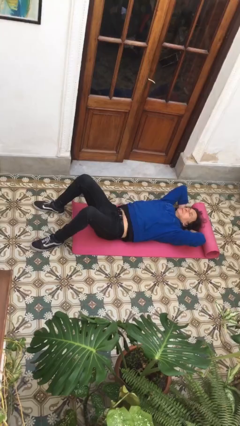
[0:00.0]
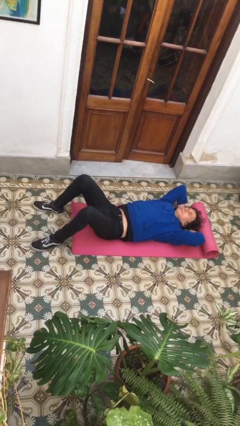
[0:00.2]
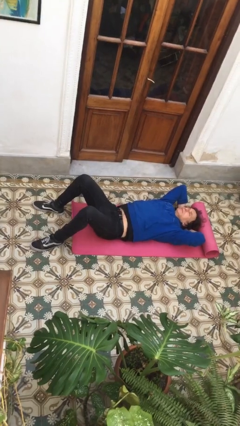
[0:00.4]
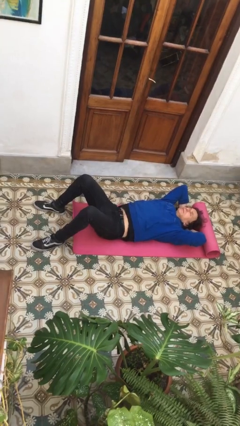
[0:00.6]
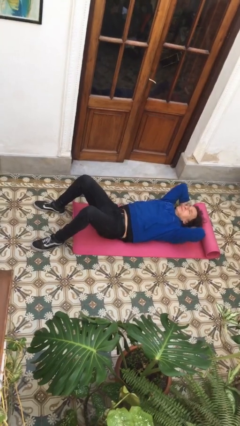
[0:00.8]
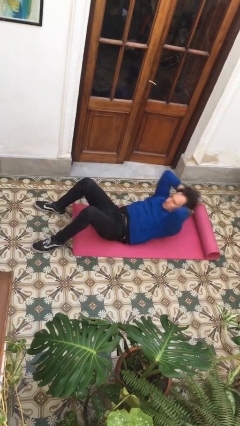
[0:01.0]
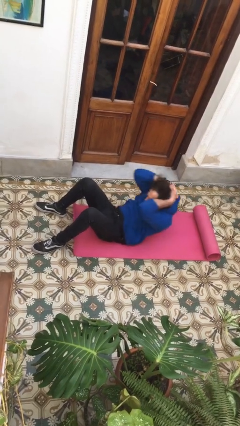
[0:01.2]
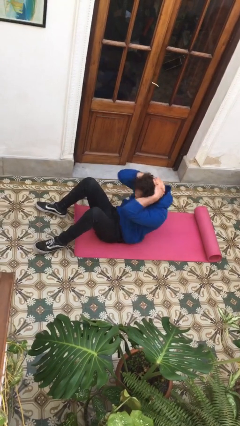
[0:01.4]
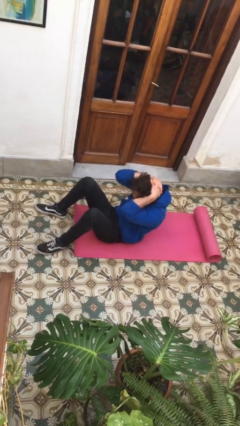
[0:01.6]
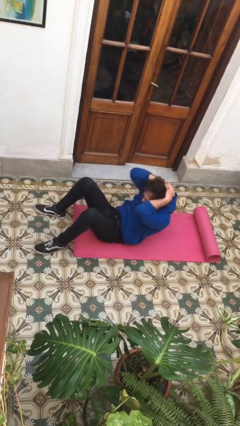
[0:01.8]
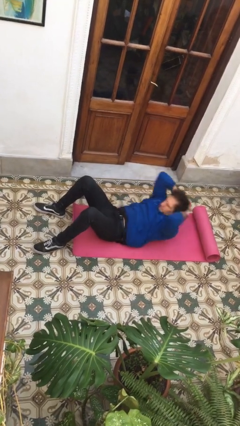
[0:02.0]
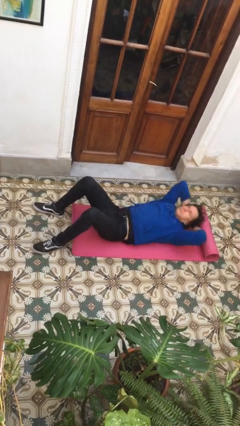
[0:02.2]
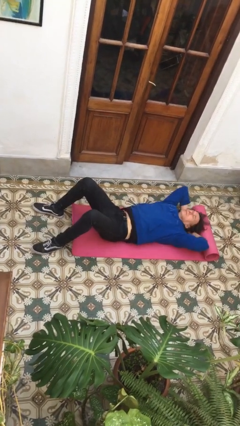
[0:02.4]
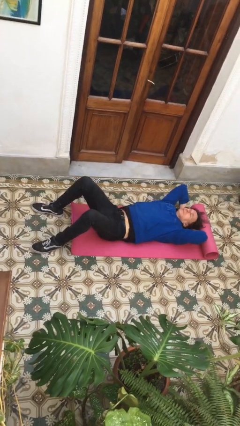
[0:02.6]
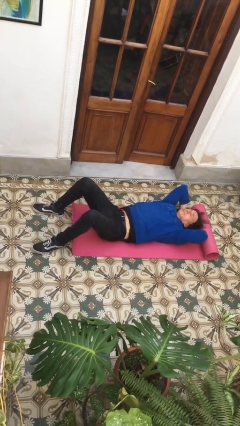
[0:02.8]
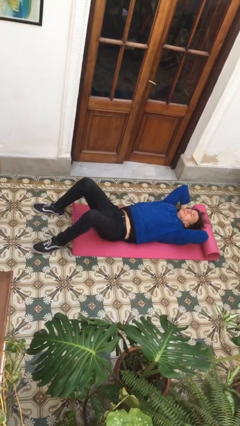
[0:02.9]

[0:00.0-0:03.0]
person exercises with situp

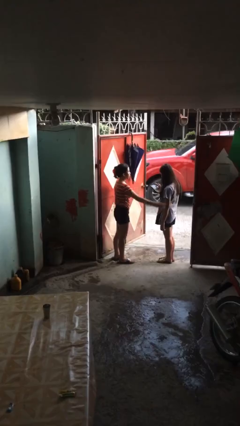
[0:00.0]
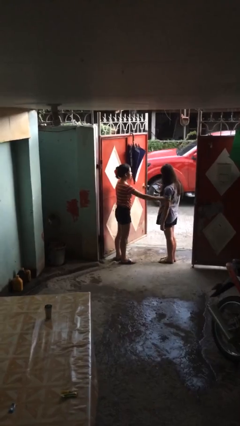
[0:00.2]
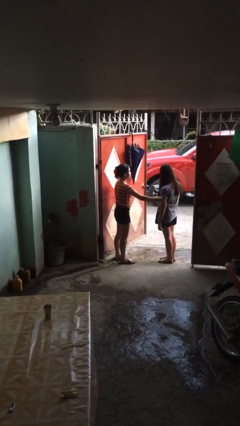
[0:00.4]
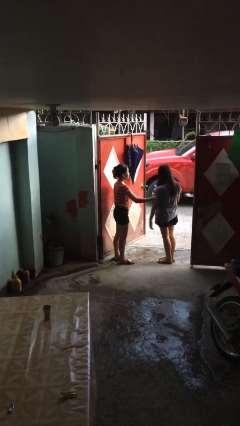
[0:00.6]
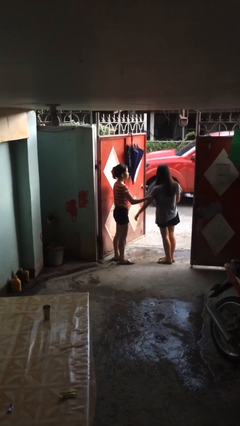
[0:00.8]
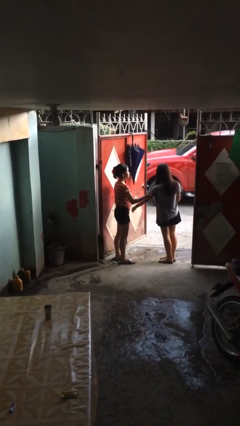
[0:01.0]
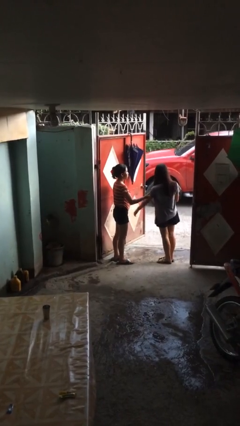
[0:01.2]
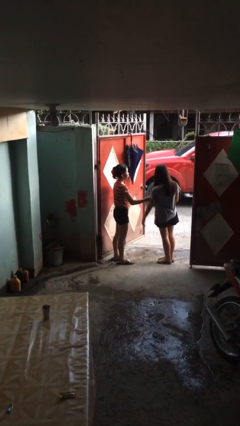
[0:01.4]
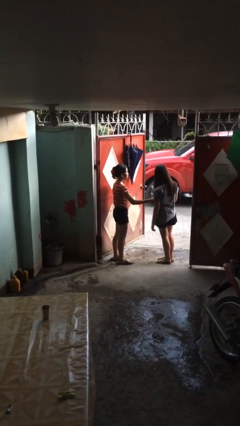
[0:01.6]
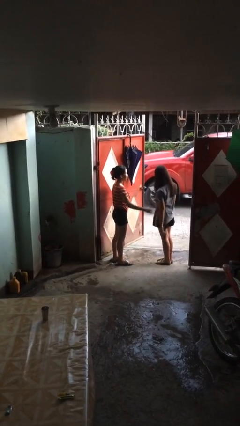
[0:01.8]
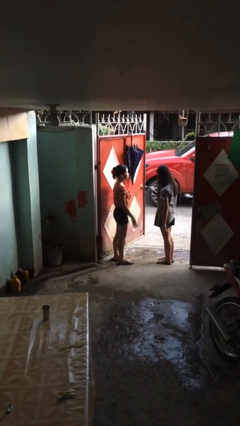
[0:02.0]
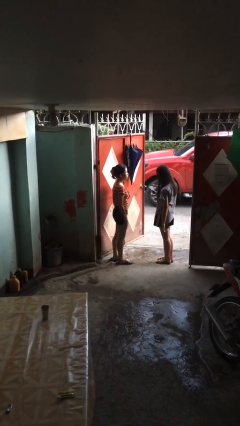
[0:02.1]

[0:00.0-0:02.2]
person grabs person by bicep

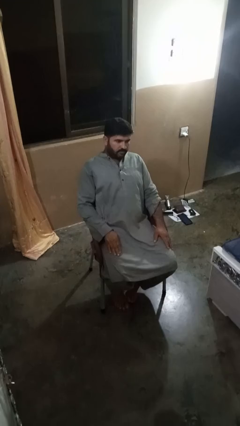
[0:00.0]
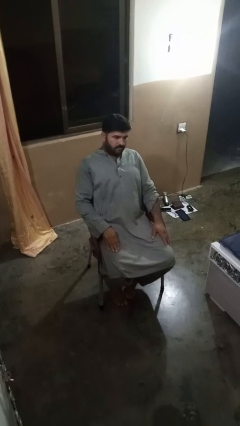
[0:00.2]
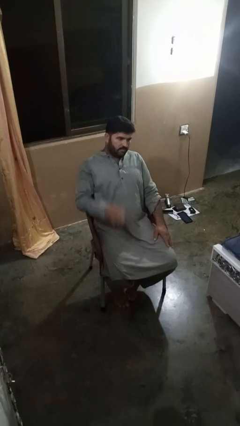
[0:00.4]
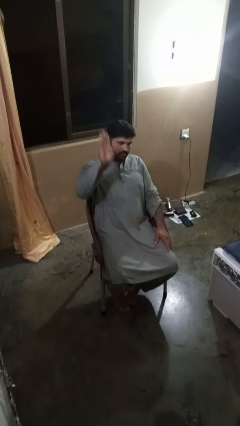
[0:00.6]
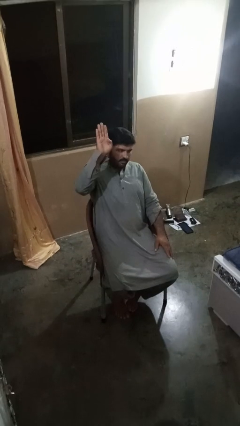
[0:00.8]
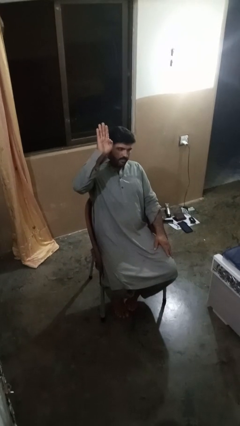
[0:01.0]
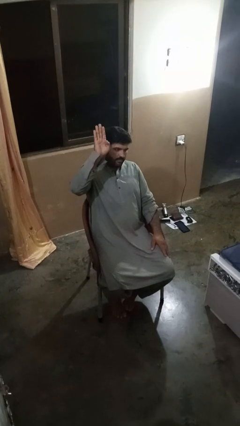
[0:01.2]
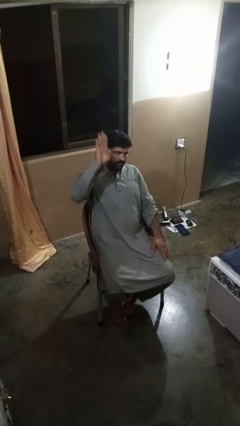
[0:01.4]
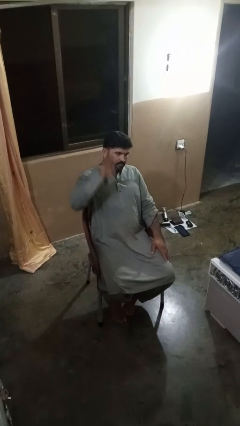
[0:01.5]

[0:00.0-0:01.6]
person gestures number four

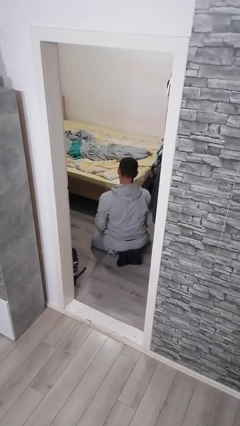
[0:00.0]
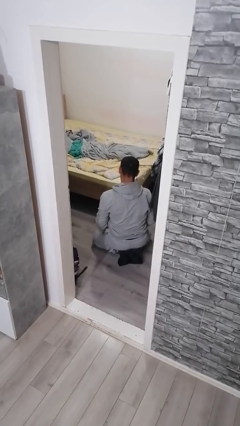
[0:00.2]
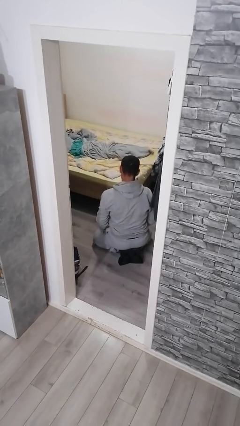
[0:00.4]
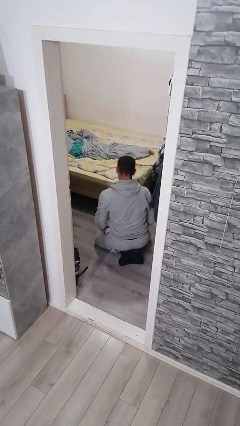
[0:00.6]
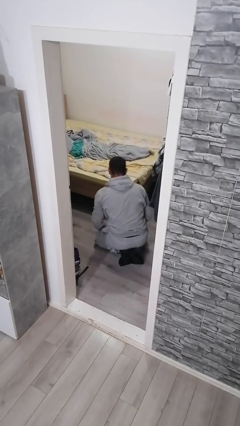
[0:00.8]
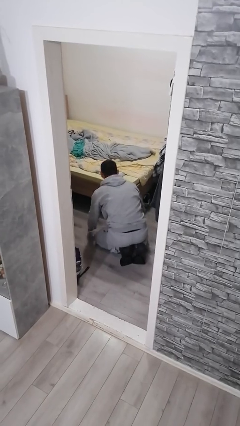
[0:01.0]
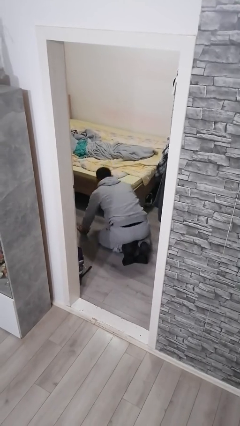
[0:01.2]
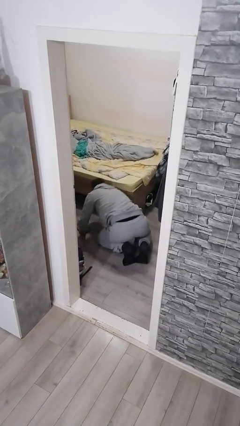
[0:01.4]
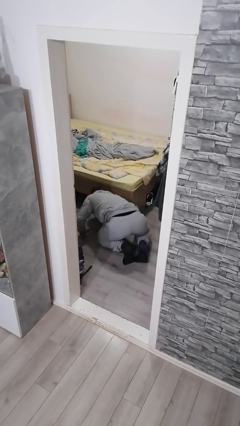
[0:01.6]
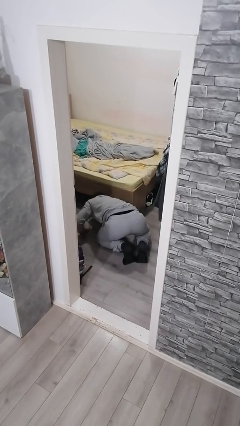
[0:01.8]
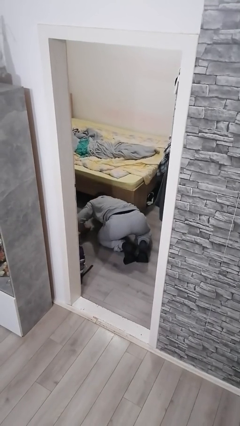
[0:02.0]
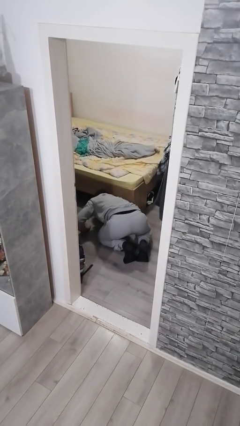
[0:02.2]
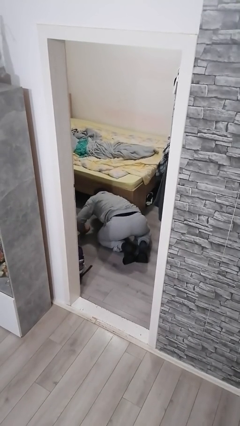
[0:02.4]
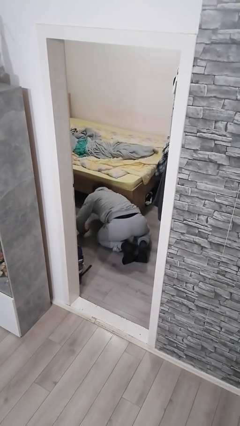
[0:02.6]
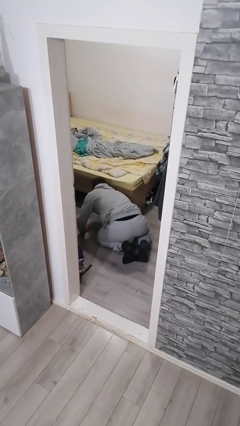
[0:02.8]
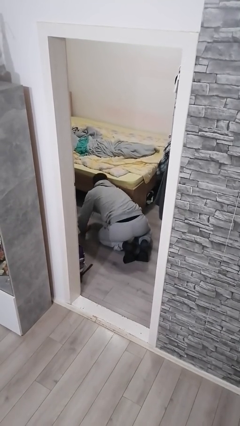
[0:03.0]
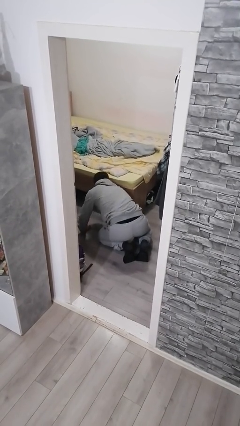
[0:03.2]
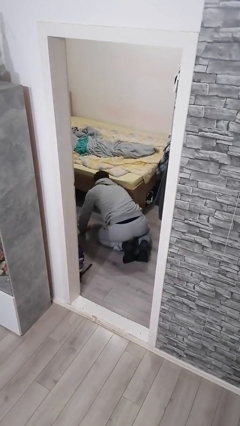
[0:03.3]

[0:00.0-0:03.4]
person searches under bed

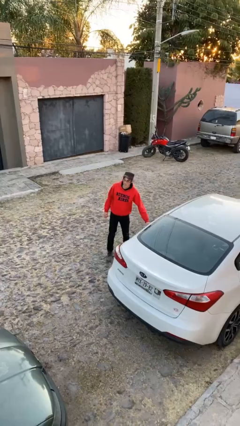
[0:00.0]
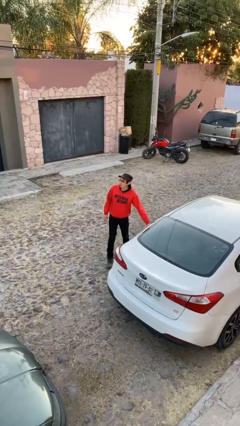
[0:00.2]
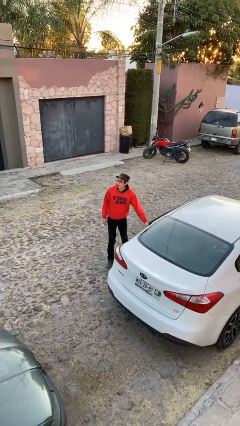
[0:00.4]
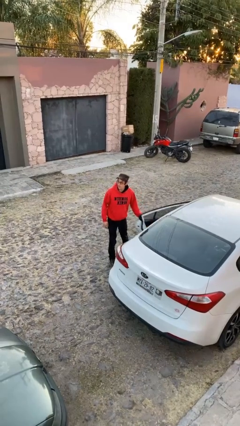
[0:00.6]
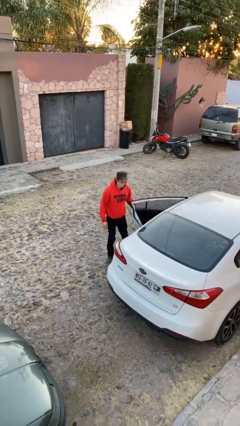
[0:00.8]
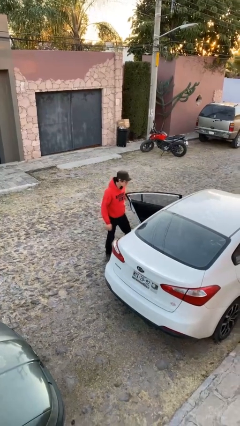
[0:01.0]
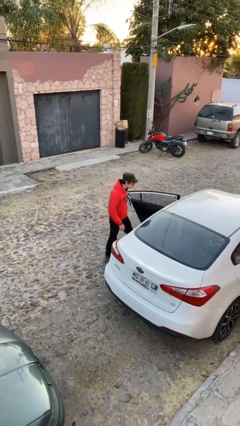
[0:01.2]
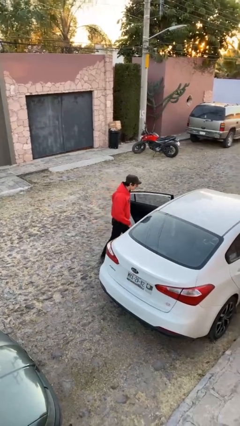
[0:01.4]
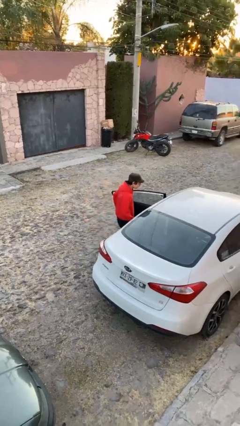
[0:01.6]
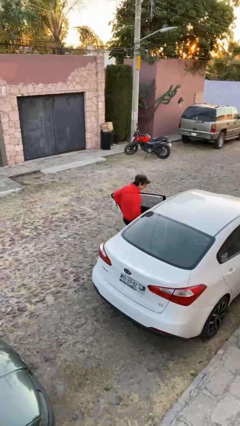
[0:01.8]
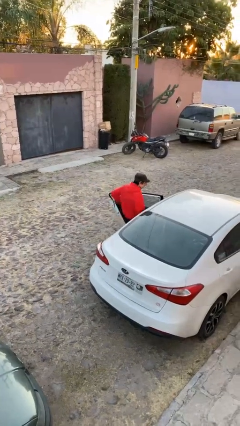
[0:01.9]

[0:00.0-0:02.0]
car picks up person

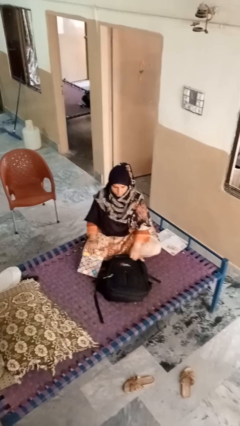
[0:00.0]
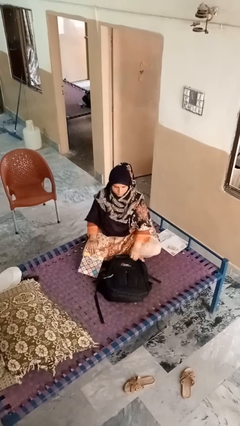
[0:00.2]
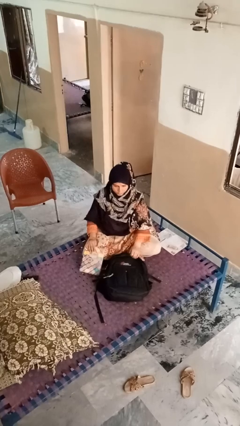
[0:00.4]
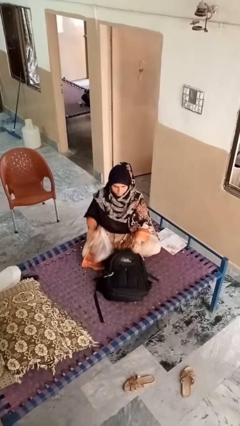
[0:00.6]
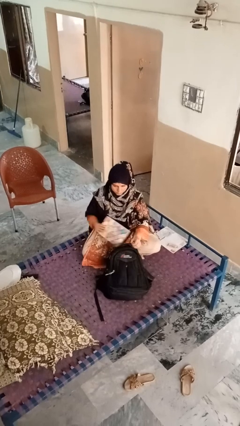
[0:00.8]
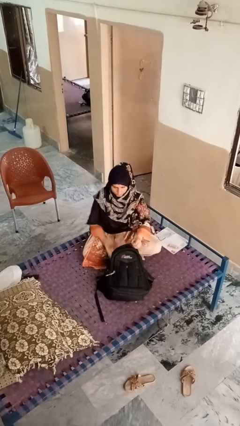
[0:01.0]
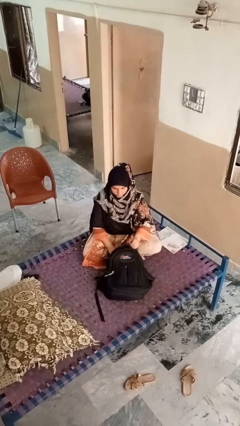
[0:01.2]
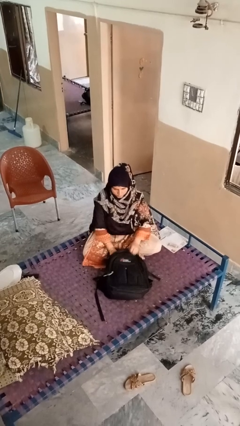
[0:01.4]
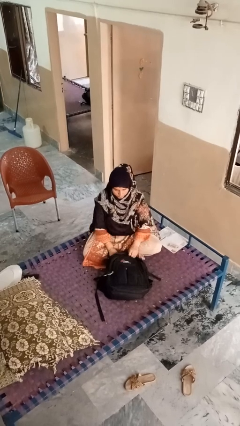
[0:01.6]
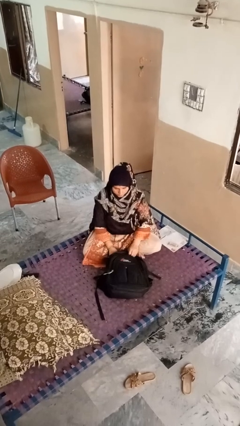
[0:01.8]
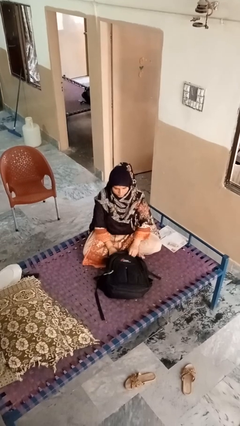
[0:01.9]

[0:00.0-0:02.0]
person puts object into bag

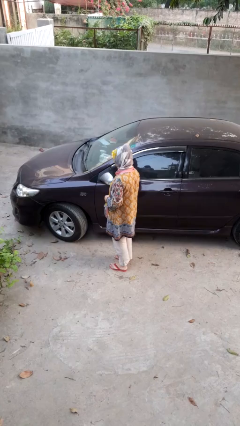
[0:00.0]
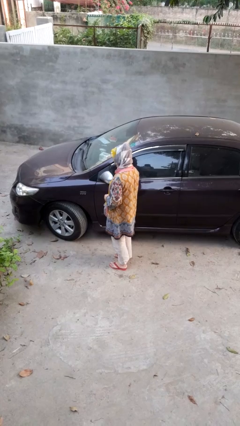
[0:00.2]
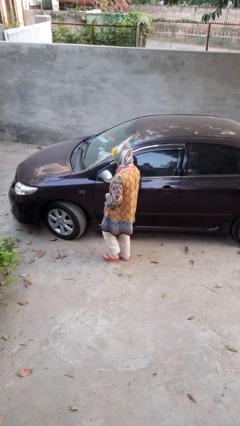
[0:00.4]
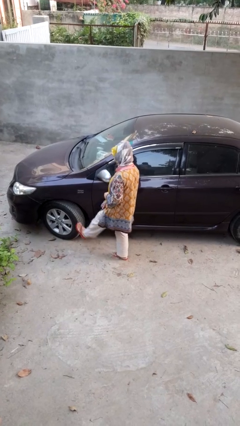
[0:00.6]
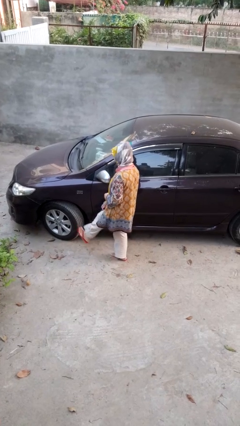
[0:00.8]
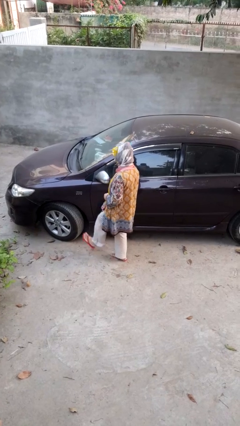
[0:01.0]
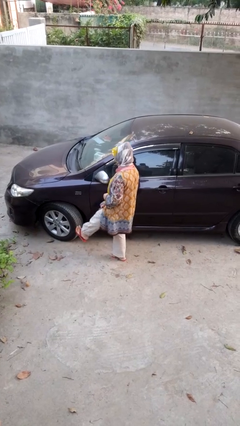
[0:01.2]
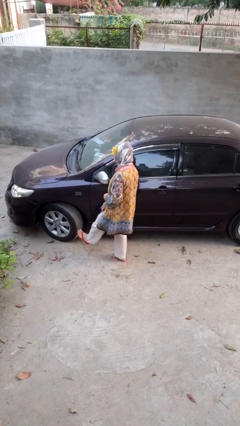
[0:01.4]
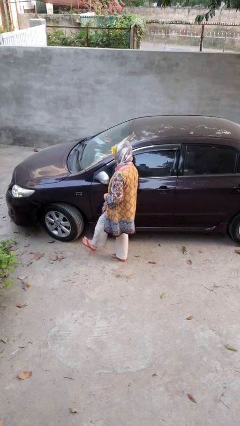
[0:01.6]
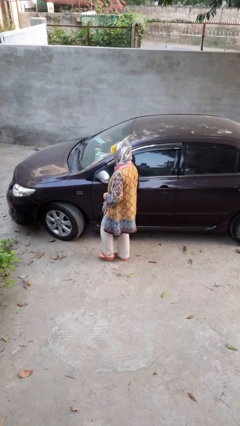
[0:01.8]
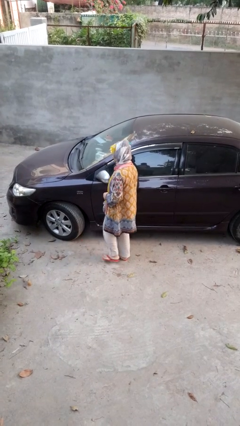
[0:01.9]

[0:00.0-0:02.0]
person kicks car tires

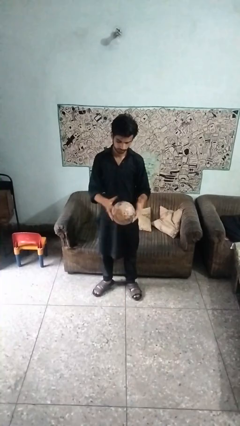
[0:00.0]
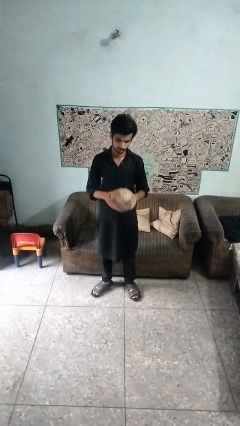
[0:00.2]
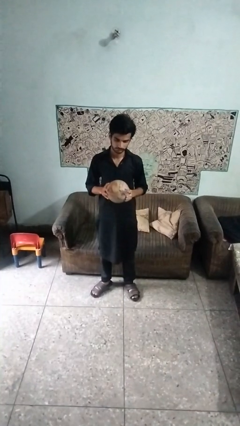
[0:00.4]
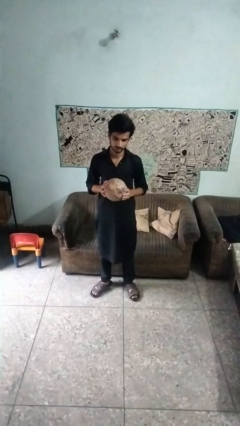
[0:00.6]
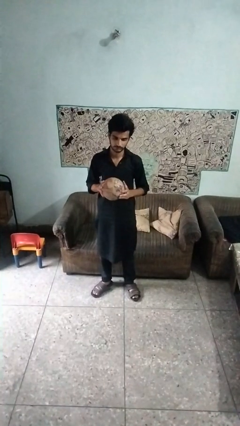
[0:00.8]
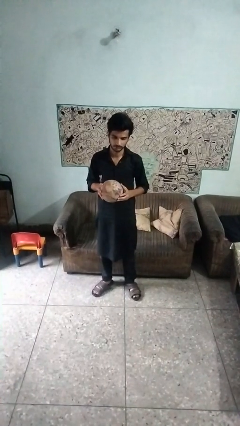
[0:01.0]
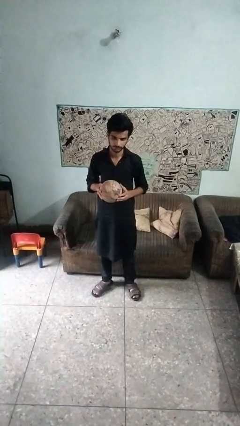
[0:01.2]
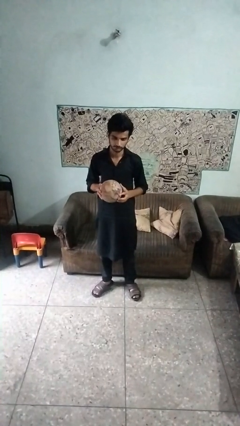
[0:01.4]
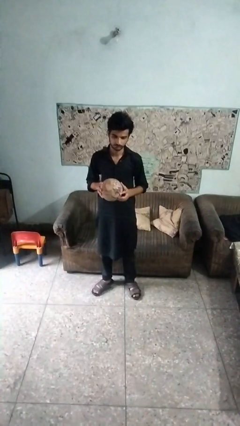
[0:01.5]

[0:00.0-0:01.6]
person takes off hoodie
